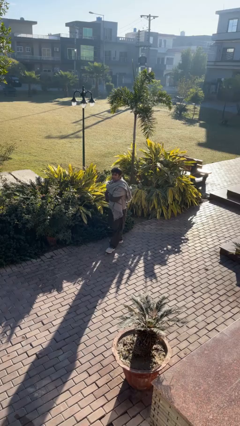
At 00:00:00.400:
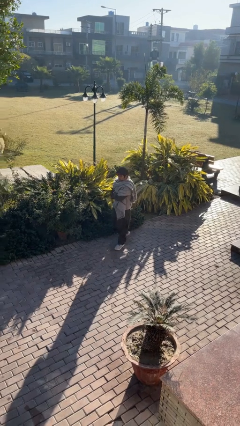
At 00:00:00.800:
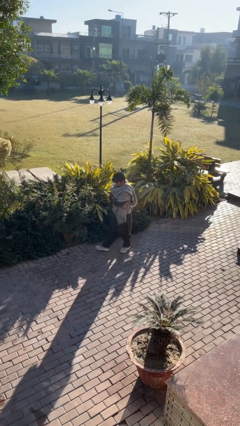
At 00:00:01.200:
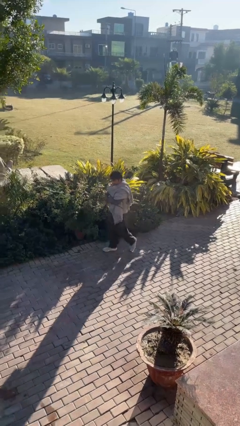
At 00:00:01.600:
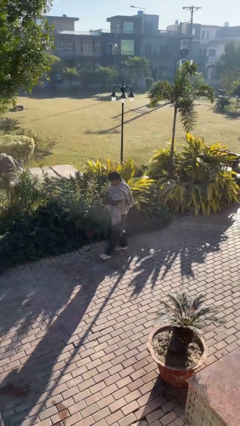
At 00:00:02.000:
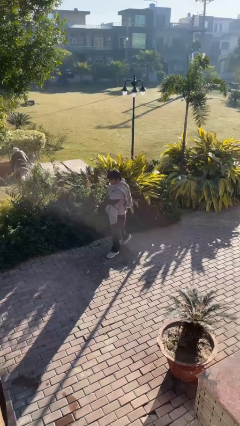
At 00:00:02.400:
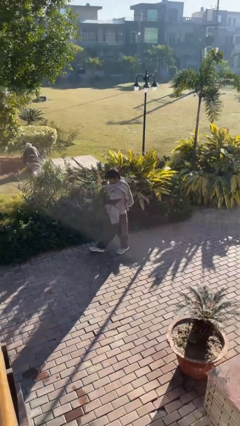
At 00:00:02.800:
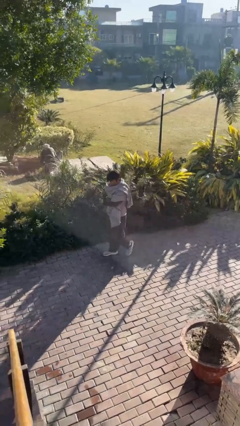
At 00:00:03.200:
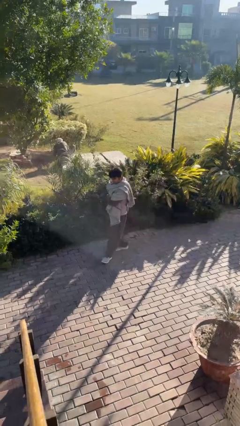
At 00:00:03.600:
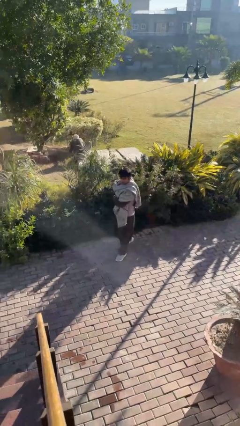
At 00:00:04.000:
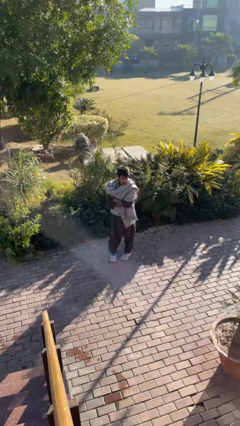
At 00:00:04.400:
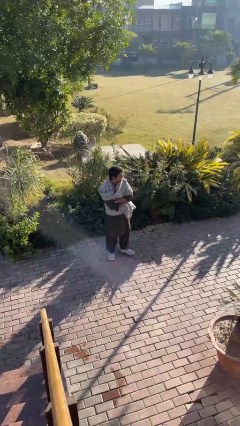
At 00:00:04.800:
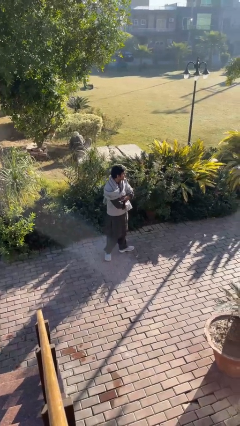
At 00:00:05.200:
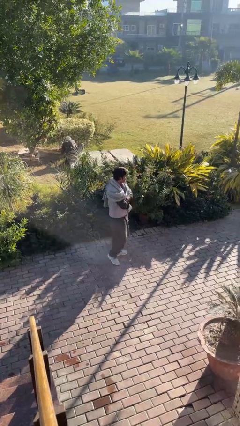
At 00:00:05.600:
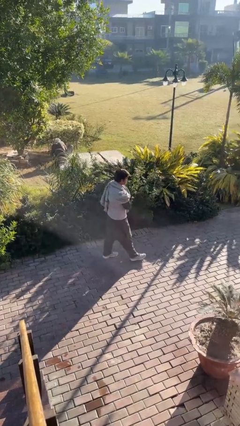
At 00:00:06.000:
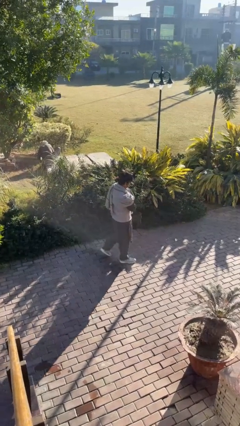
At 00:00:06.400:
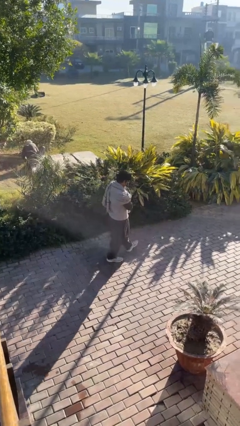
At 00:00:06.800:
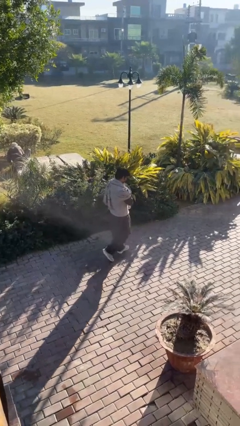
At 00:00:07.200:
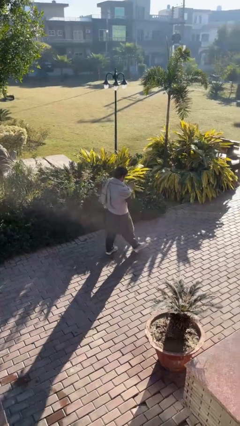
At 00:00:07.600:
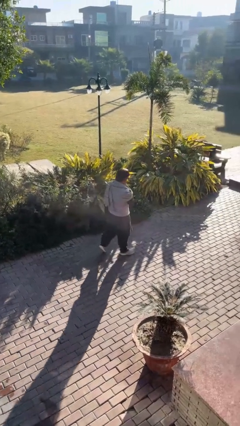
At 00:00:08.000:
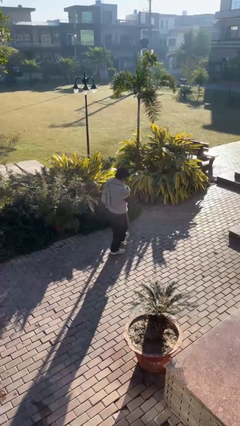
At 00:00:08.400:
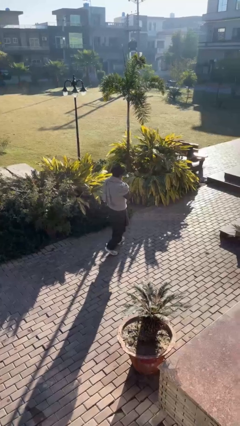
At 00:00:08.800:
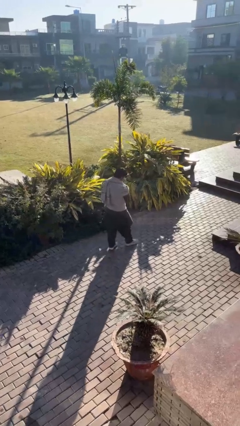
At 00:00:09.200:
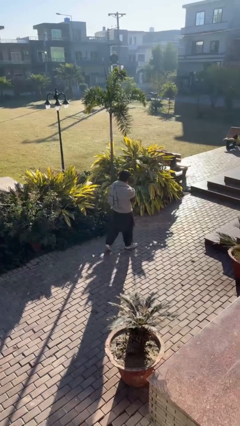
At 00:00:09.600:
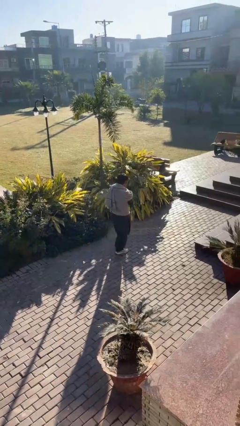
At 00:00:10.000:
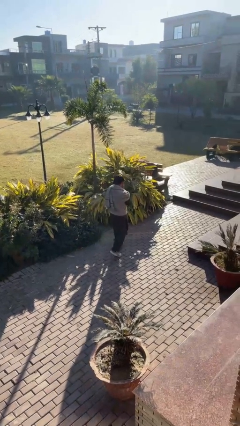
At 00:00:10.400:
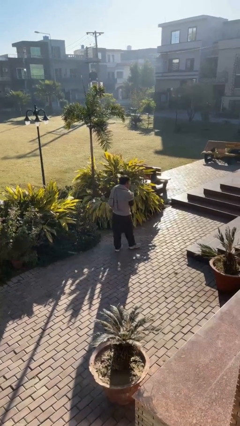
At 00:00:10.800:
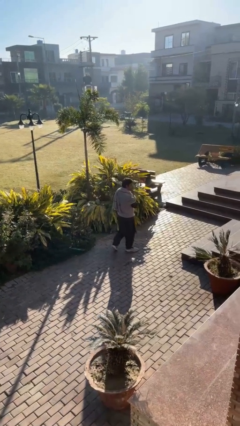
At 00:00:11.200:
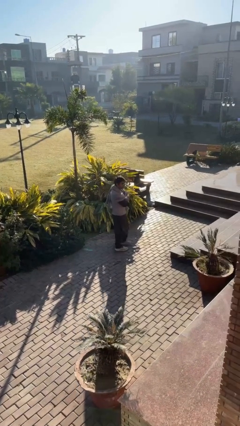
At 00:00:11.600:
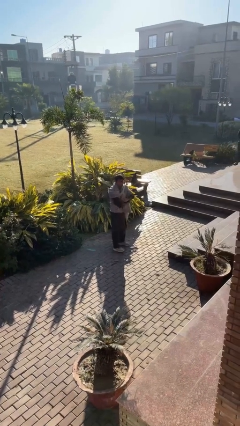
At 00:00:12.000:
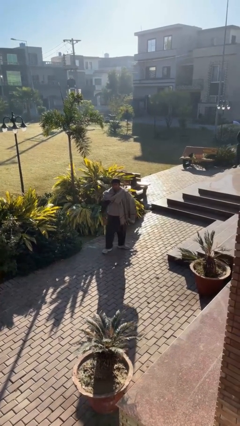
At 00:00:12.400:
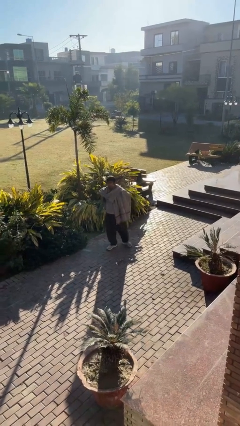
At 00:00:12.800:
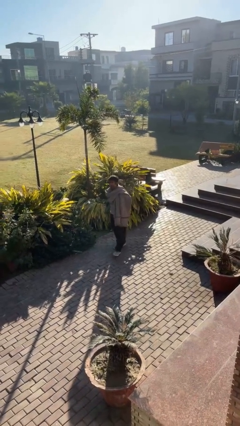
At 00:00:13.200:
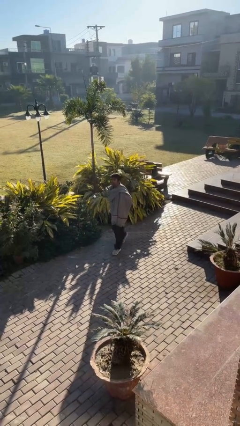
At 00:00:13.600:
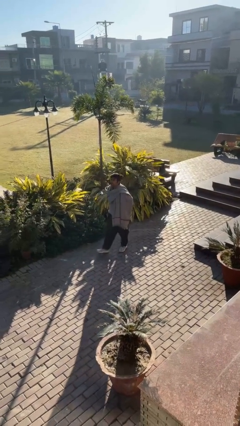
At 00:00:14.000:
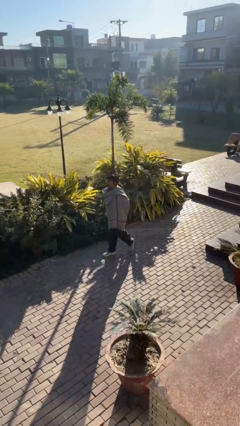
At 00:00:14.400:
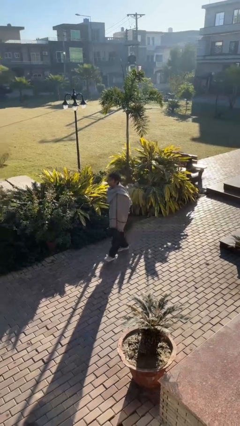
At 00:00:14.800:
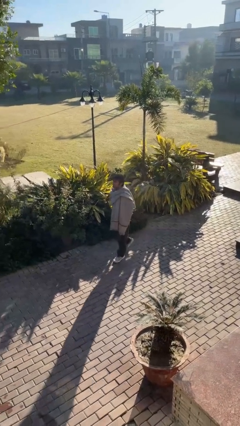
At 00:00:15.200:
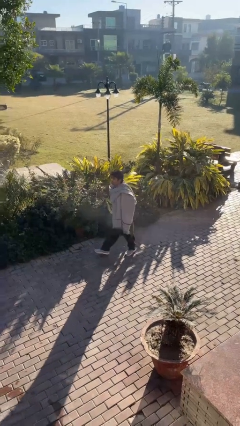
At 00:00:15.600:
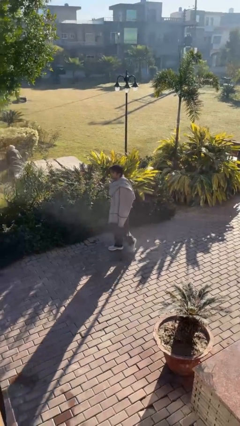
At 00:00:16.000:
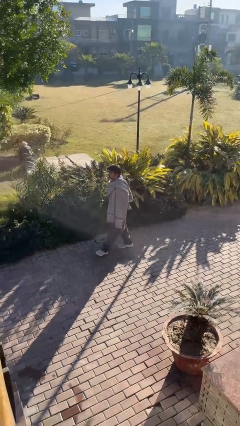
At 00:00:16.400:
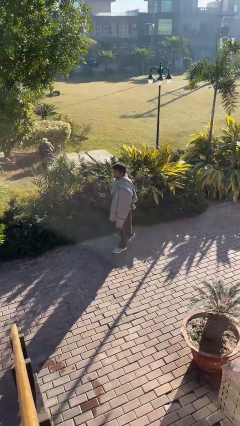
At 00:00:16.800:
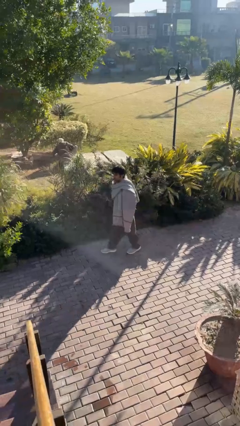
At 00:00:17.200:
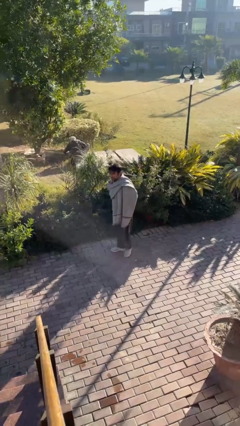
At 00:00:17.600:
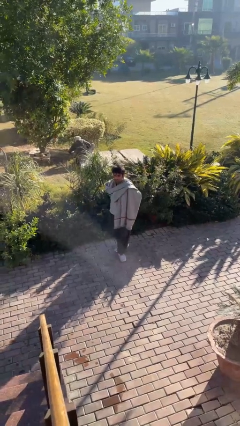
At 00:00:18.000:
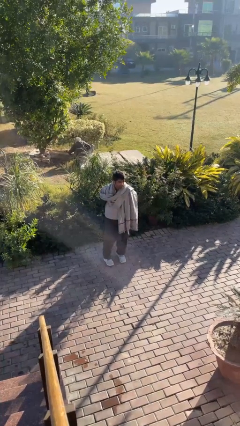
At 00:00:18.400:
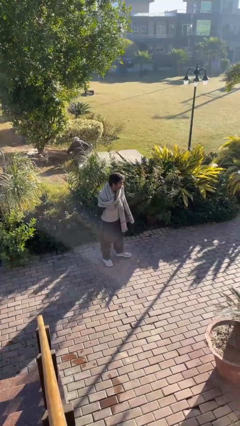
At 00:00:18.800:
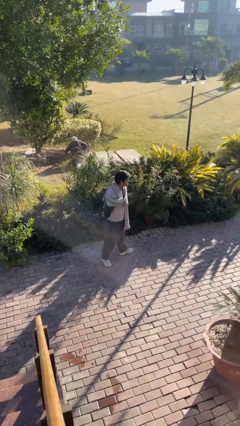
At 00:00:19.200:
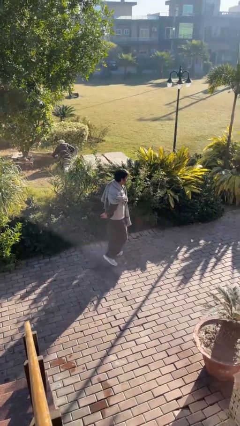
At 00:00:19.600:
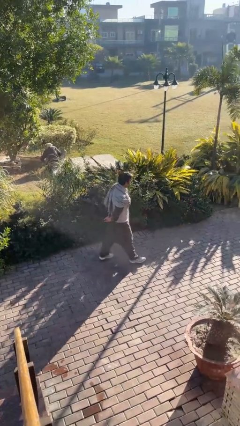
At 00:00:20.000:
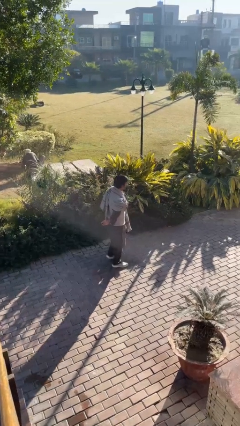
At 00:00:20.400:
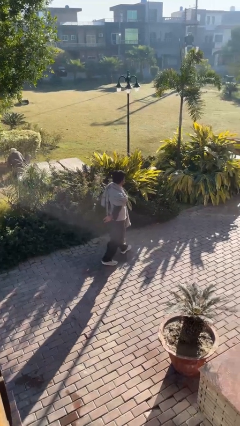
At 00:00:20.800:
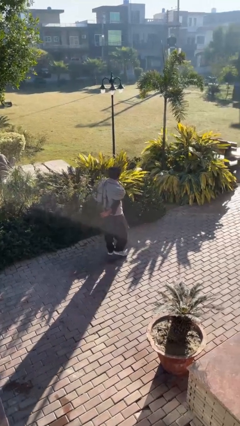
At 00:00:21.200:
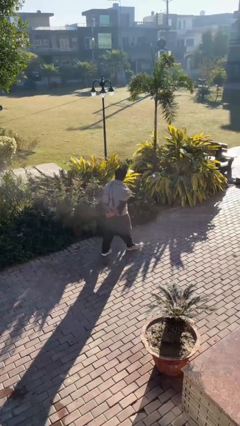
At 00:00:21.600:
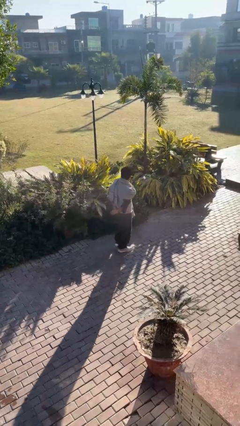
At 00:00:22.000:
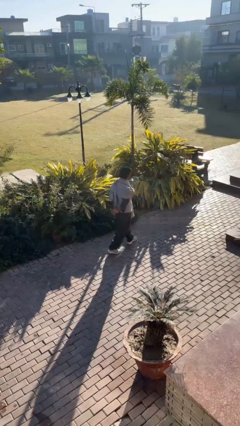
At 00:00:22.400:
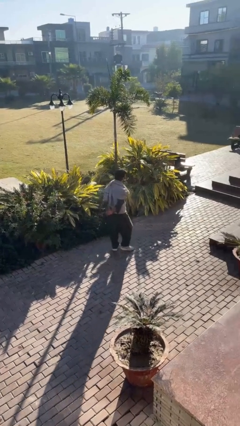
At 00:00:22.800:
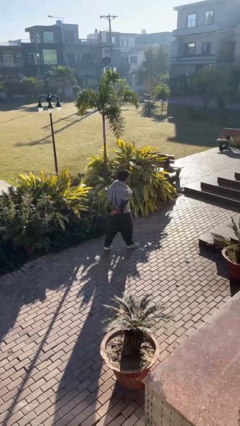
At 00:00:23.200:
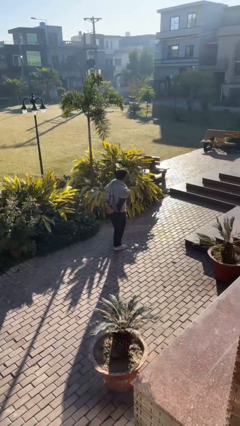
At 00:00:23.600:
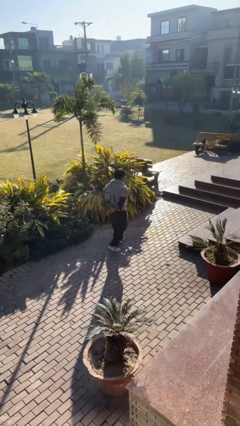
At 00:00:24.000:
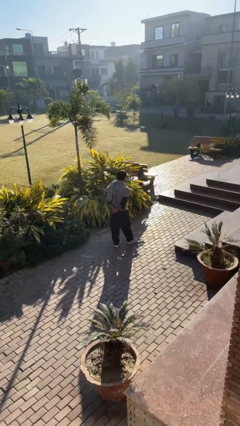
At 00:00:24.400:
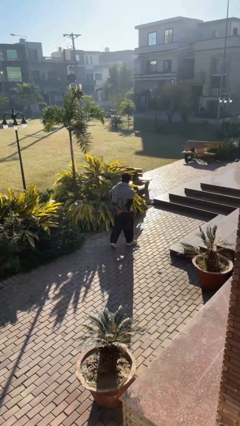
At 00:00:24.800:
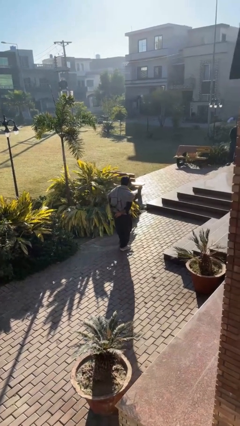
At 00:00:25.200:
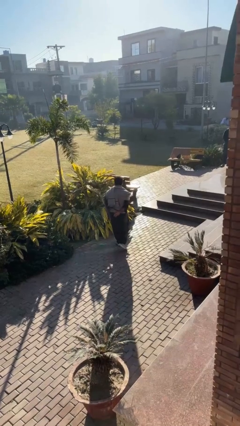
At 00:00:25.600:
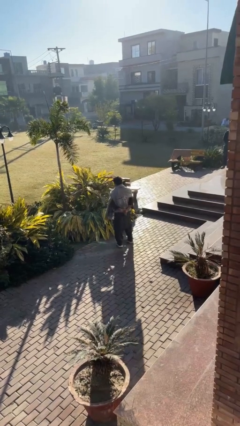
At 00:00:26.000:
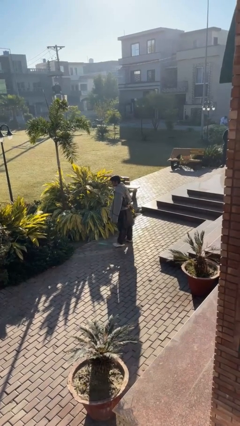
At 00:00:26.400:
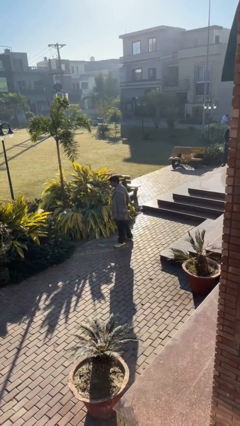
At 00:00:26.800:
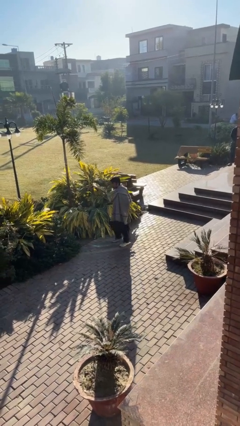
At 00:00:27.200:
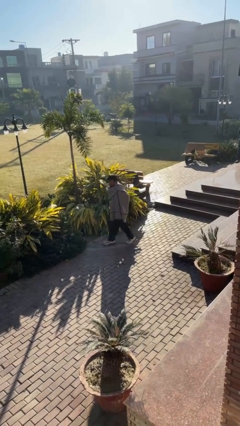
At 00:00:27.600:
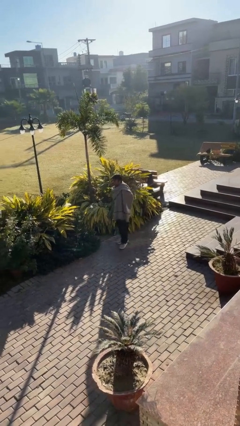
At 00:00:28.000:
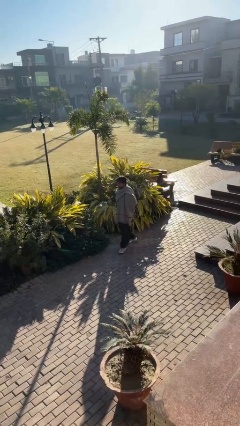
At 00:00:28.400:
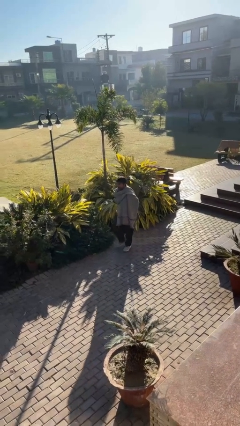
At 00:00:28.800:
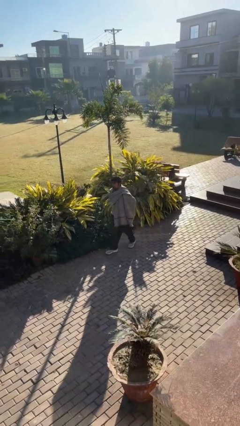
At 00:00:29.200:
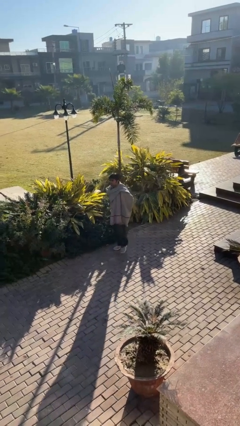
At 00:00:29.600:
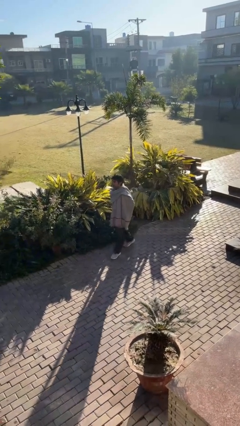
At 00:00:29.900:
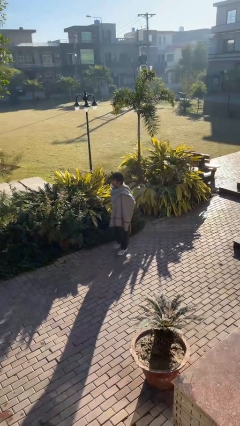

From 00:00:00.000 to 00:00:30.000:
person walks

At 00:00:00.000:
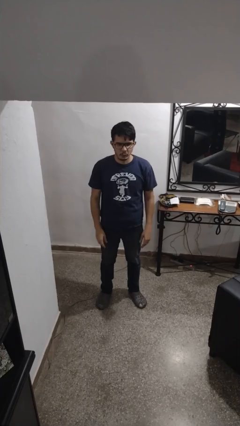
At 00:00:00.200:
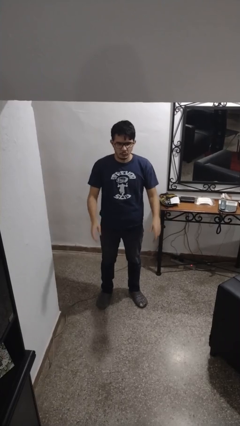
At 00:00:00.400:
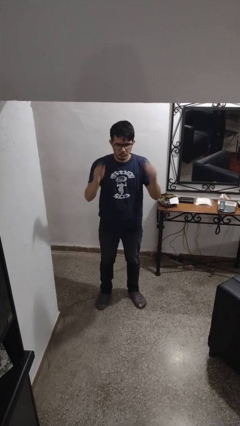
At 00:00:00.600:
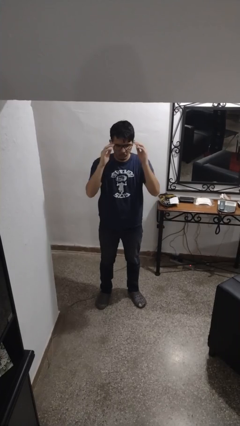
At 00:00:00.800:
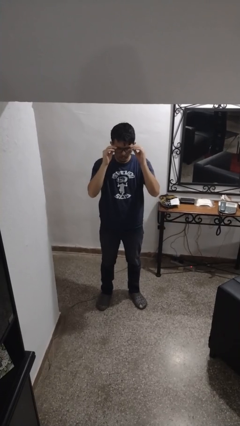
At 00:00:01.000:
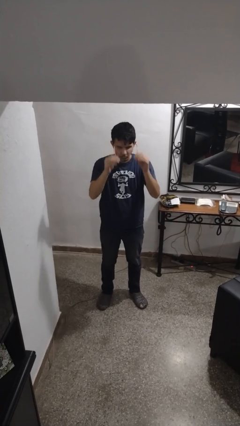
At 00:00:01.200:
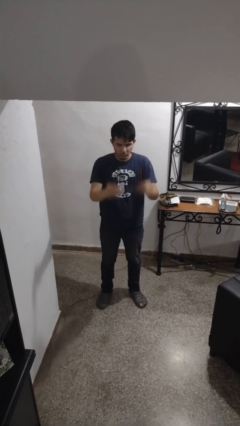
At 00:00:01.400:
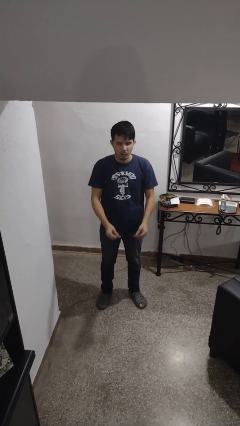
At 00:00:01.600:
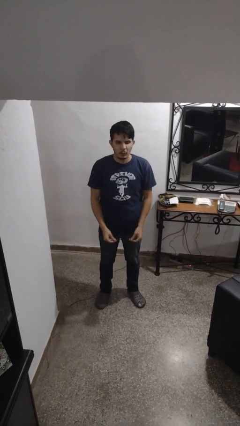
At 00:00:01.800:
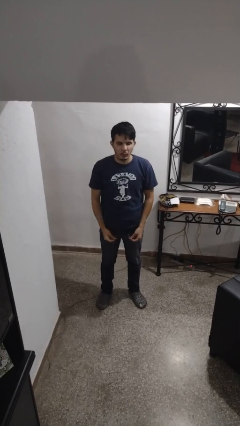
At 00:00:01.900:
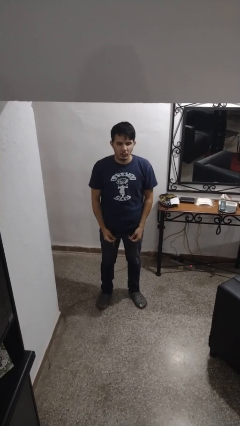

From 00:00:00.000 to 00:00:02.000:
person takes off glasses

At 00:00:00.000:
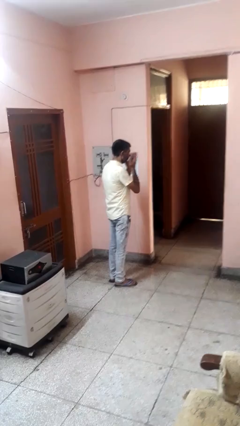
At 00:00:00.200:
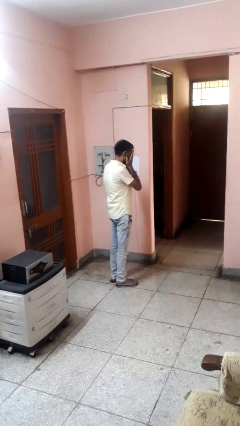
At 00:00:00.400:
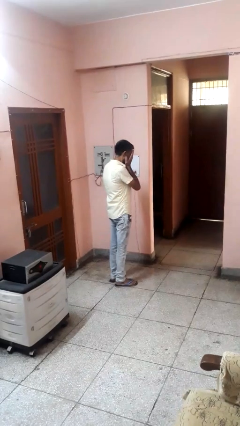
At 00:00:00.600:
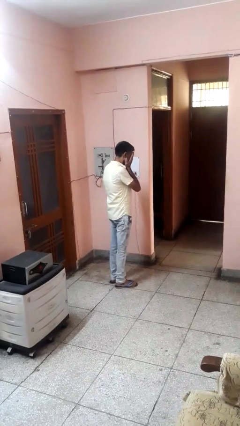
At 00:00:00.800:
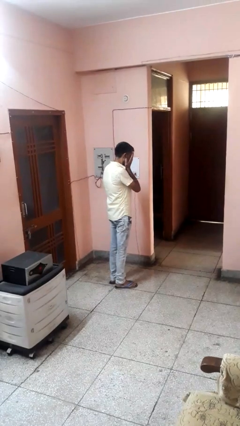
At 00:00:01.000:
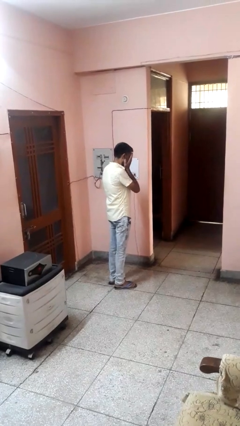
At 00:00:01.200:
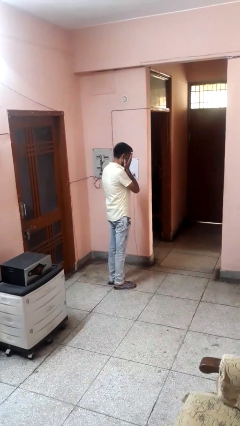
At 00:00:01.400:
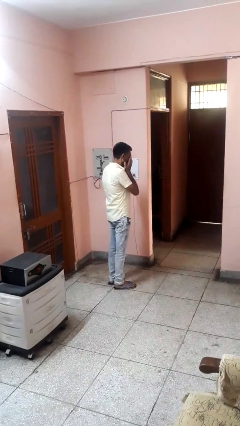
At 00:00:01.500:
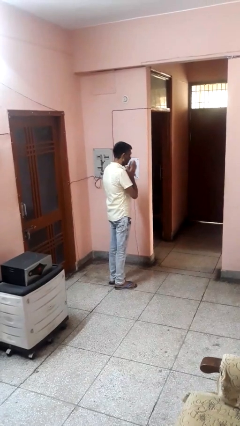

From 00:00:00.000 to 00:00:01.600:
person covers face with hands
